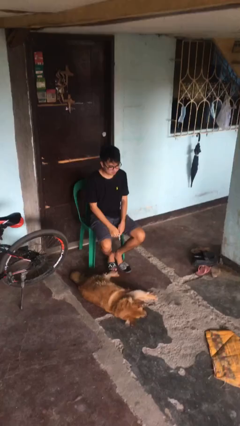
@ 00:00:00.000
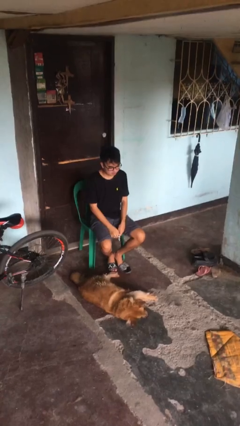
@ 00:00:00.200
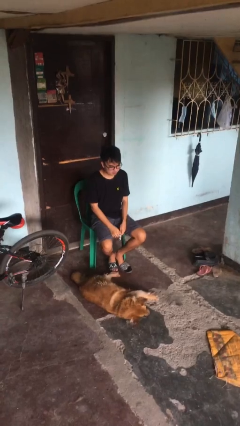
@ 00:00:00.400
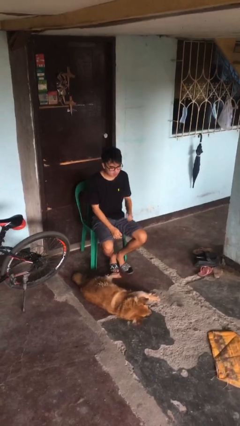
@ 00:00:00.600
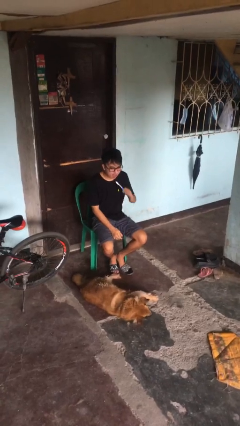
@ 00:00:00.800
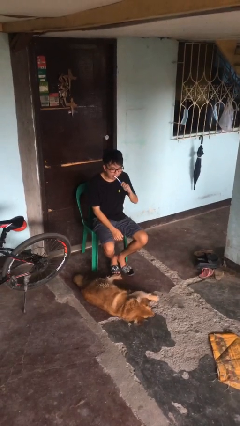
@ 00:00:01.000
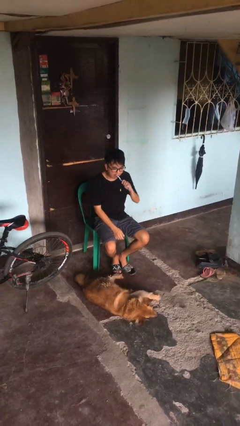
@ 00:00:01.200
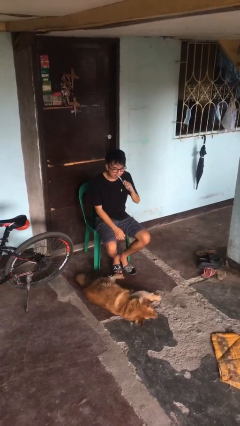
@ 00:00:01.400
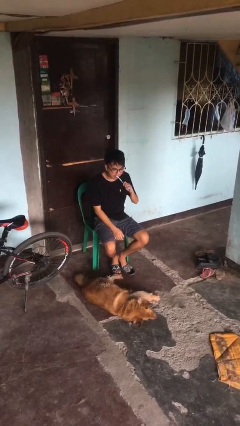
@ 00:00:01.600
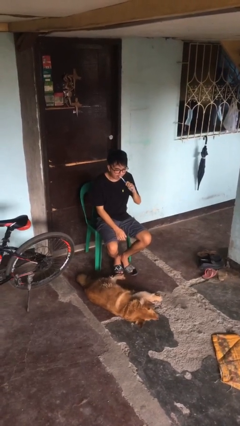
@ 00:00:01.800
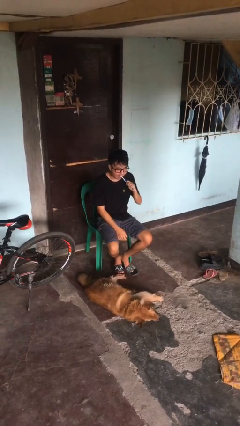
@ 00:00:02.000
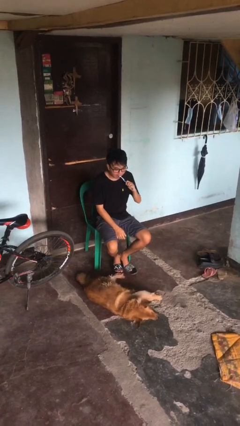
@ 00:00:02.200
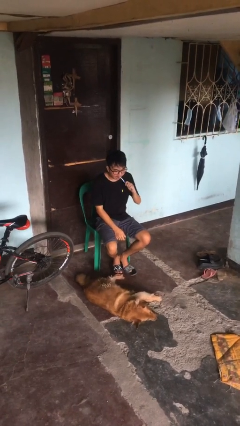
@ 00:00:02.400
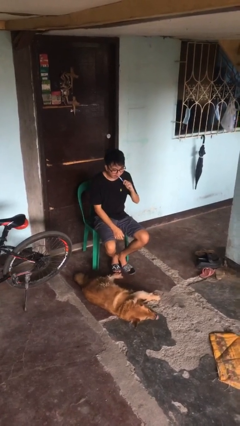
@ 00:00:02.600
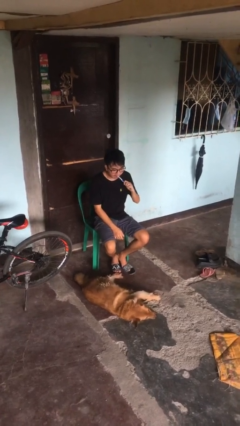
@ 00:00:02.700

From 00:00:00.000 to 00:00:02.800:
person brushes teeth

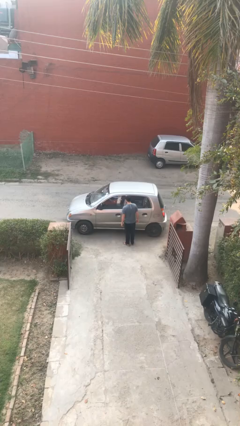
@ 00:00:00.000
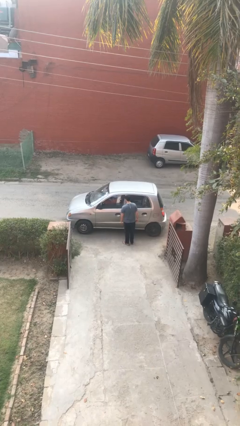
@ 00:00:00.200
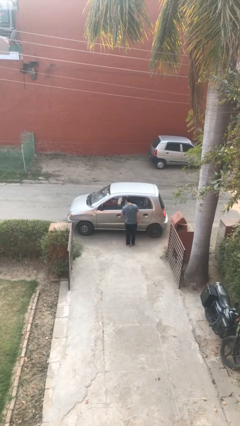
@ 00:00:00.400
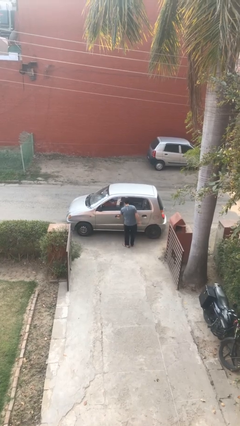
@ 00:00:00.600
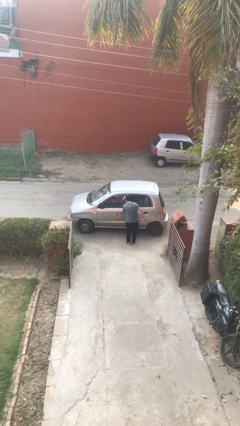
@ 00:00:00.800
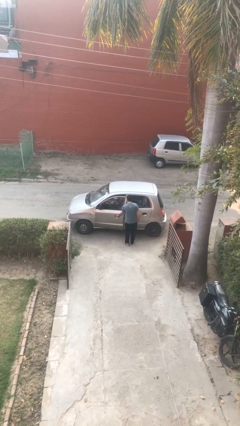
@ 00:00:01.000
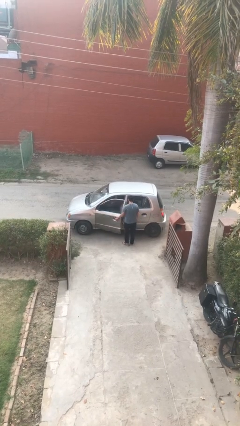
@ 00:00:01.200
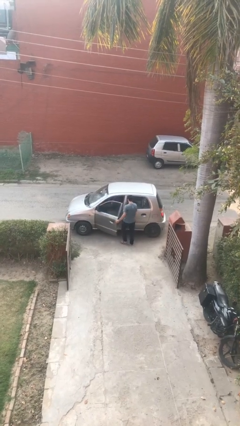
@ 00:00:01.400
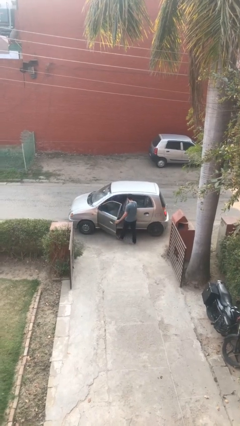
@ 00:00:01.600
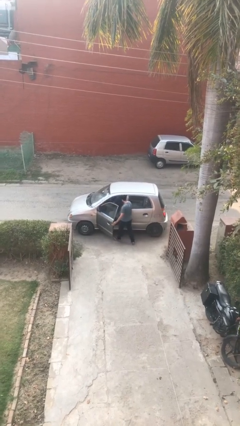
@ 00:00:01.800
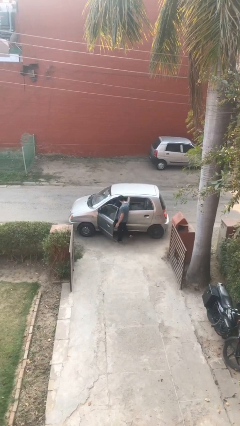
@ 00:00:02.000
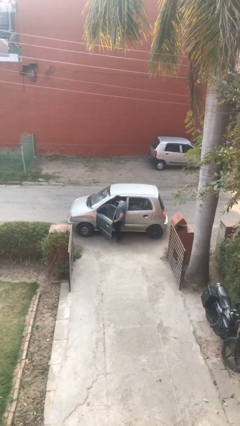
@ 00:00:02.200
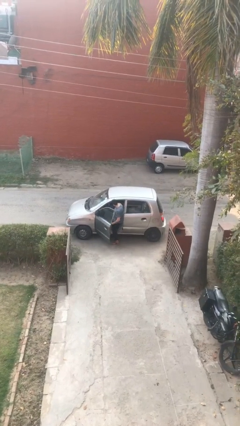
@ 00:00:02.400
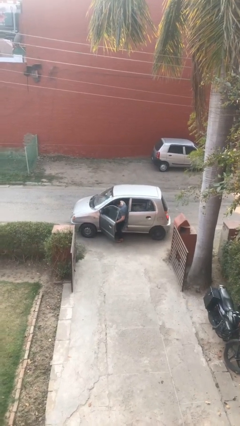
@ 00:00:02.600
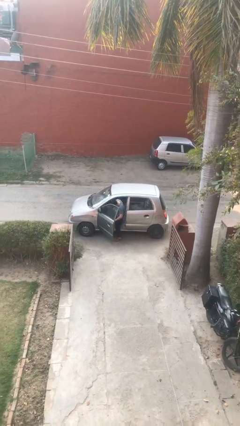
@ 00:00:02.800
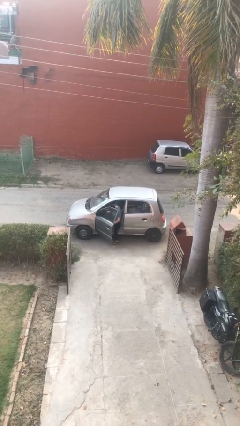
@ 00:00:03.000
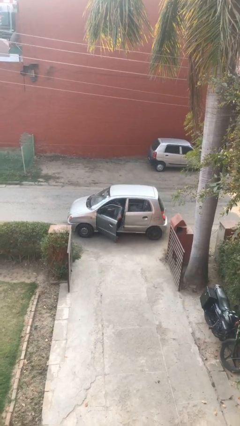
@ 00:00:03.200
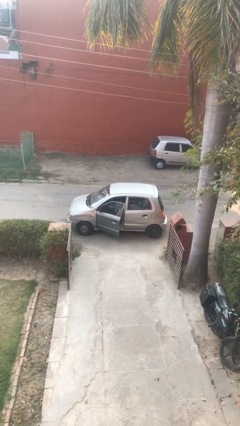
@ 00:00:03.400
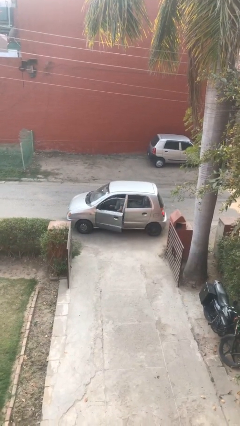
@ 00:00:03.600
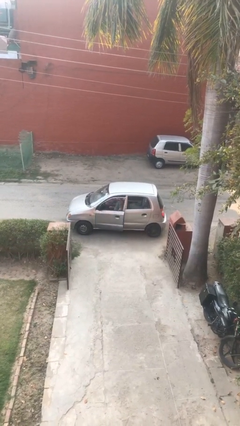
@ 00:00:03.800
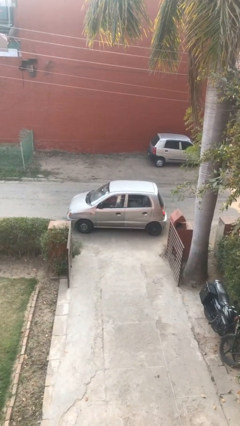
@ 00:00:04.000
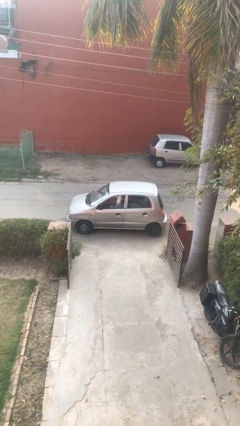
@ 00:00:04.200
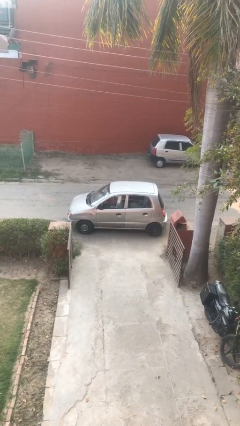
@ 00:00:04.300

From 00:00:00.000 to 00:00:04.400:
car picks up person

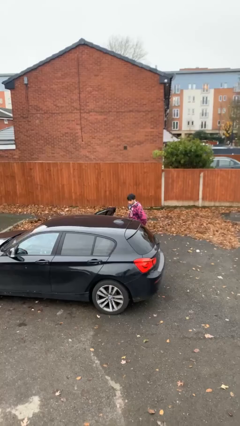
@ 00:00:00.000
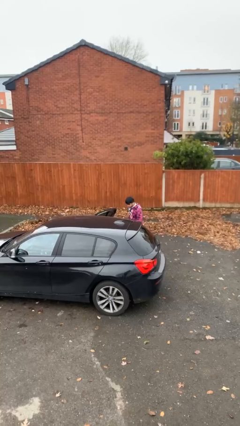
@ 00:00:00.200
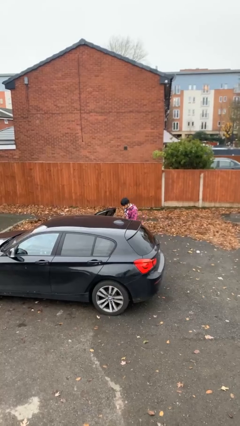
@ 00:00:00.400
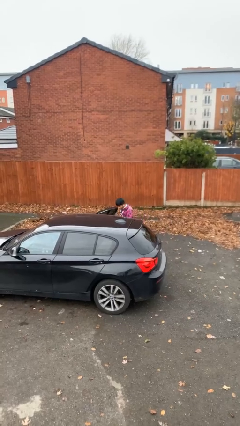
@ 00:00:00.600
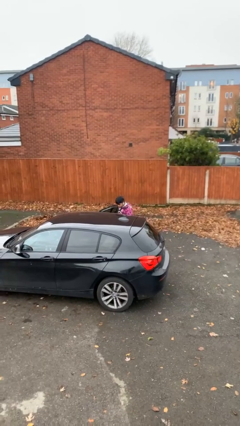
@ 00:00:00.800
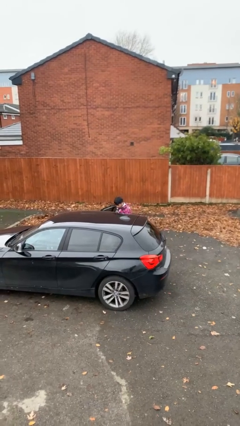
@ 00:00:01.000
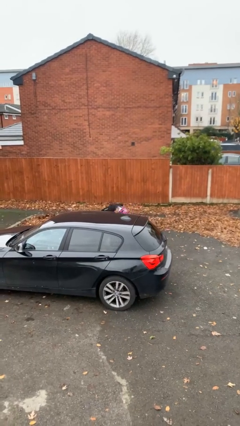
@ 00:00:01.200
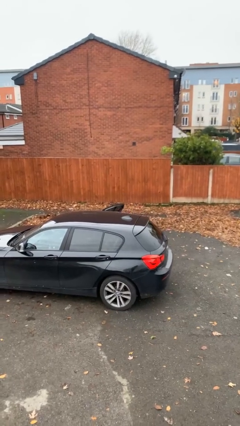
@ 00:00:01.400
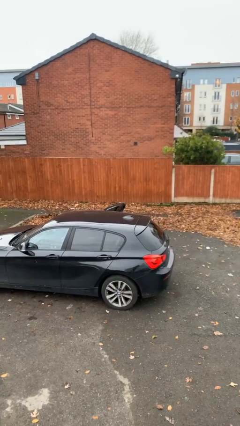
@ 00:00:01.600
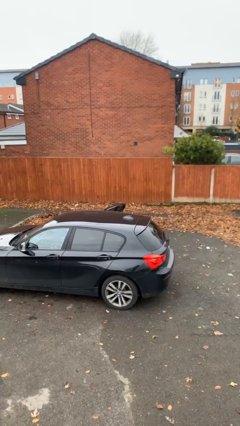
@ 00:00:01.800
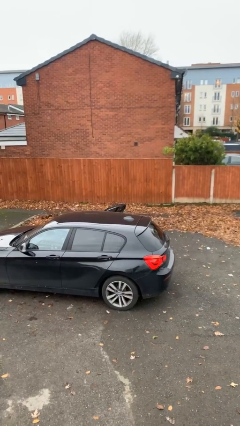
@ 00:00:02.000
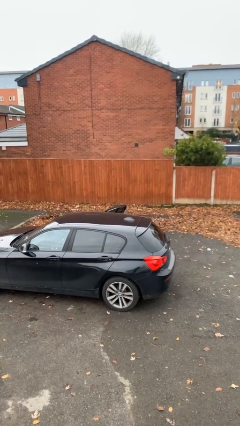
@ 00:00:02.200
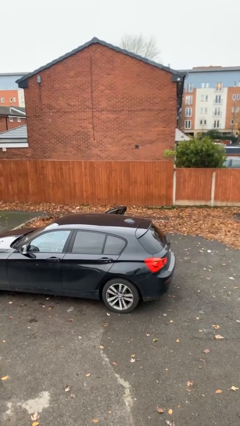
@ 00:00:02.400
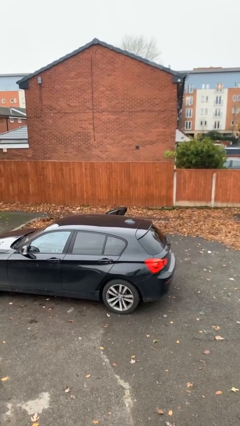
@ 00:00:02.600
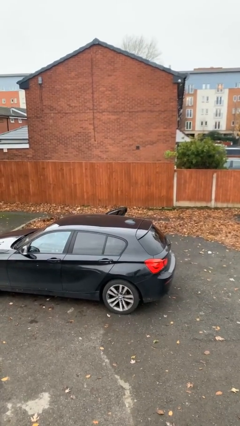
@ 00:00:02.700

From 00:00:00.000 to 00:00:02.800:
person enters car

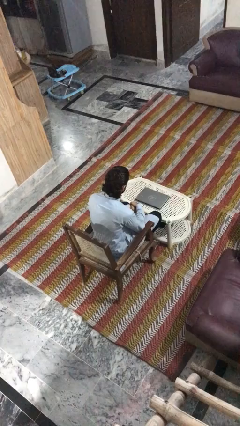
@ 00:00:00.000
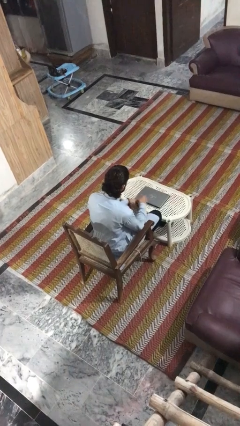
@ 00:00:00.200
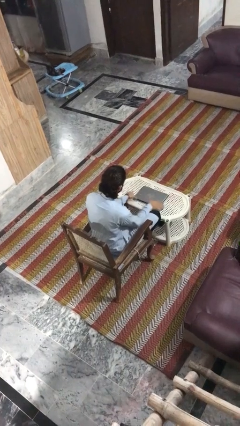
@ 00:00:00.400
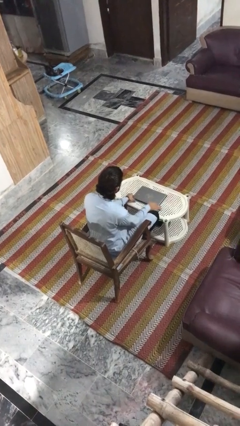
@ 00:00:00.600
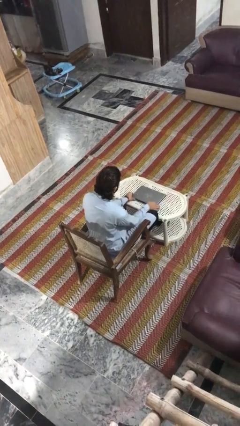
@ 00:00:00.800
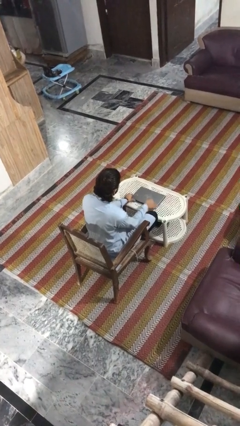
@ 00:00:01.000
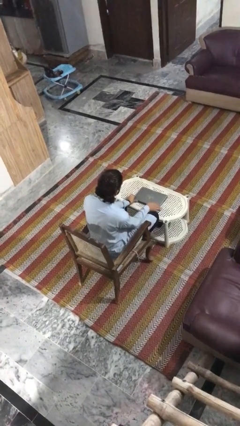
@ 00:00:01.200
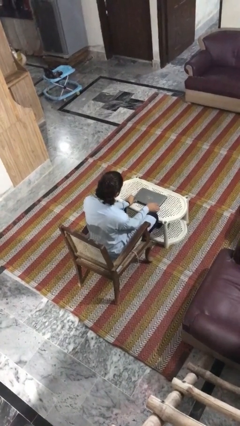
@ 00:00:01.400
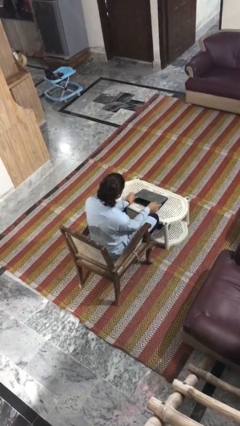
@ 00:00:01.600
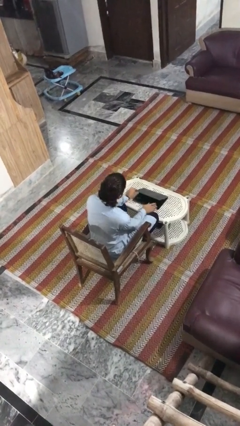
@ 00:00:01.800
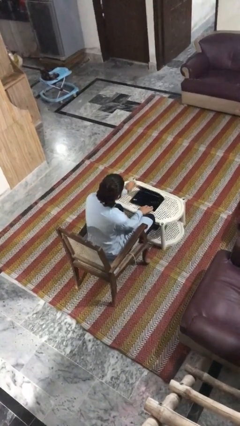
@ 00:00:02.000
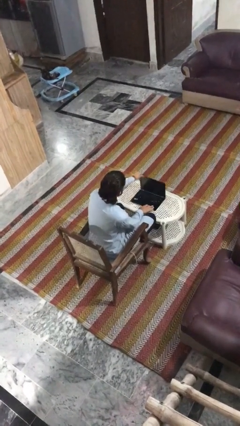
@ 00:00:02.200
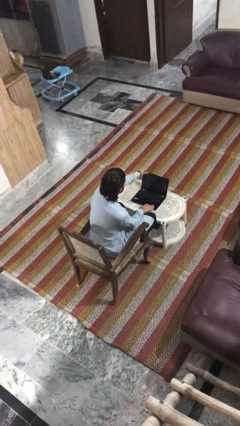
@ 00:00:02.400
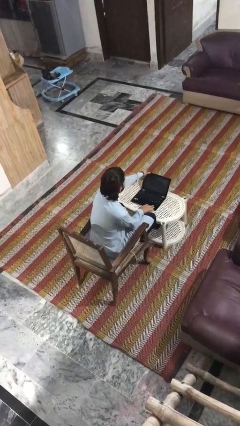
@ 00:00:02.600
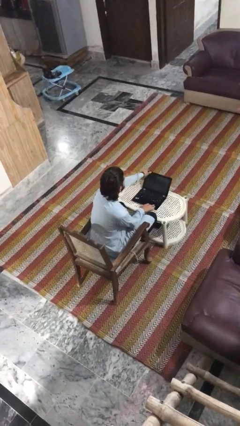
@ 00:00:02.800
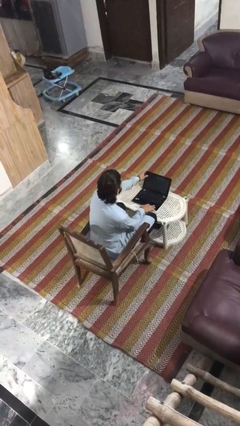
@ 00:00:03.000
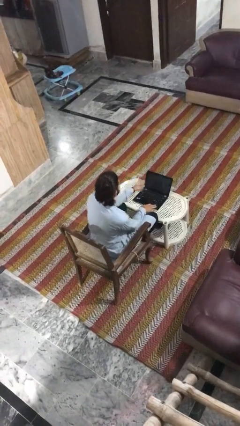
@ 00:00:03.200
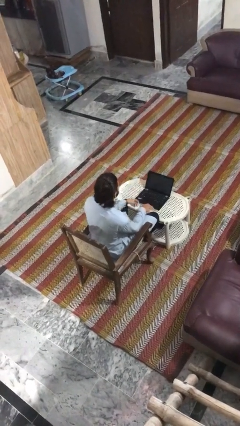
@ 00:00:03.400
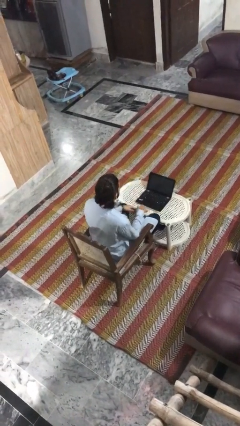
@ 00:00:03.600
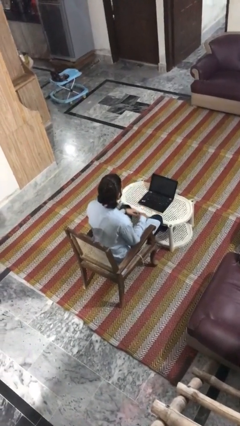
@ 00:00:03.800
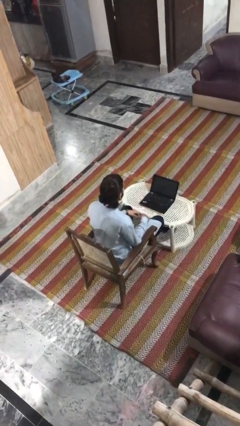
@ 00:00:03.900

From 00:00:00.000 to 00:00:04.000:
person opens laptop

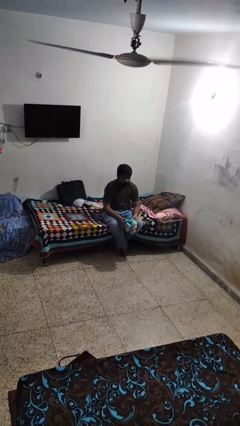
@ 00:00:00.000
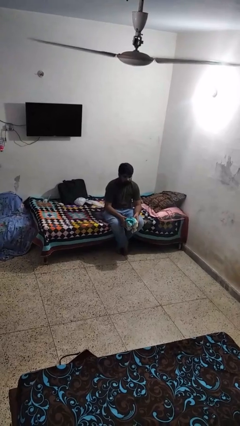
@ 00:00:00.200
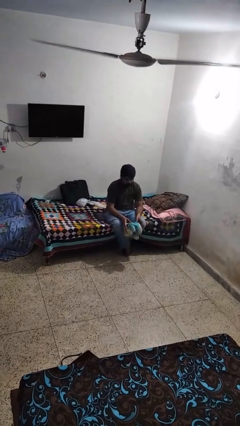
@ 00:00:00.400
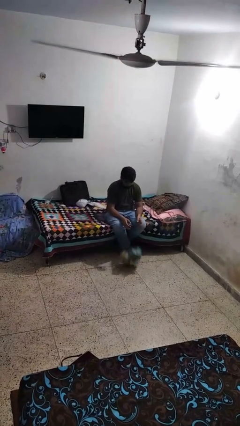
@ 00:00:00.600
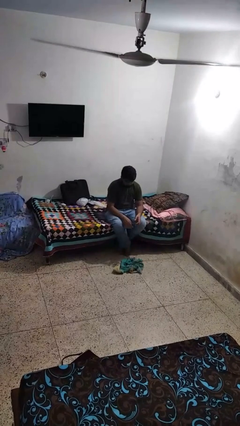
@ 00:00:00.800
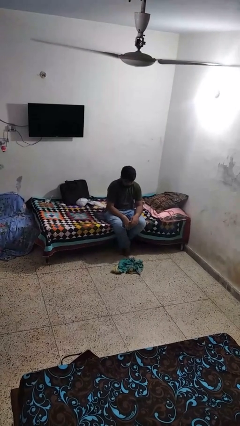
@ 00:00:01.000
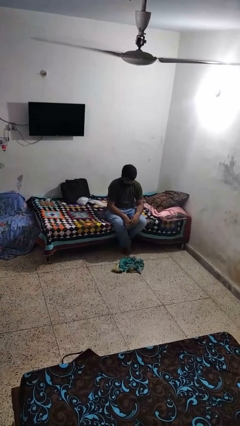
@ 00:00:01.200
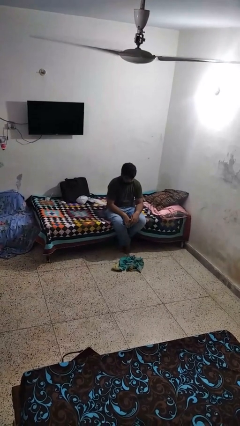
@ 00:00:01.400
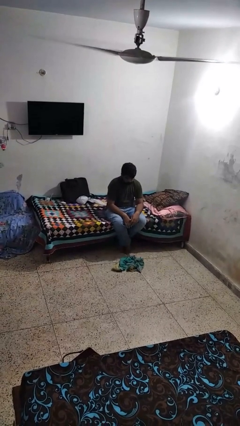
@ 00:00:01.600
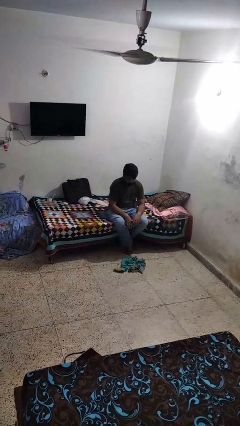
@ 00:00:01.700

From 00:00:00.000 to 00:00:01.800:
person drops object

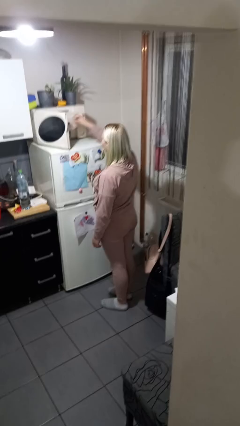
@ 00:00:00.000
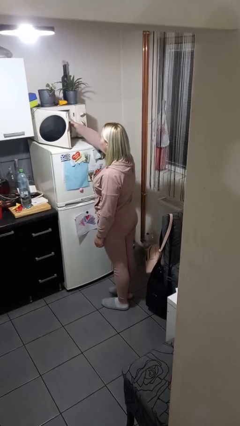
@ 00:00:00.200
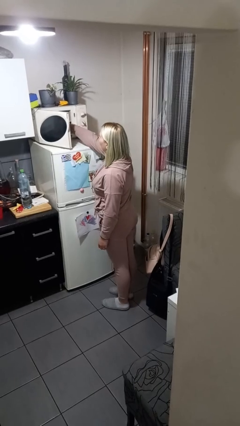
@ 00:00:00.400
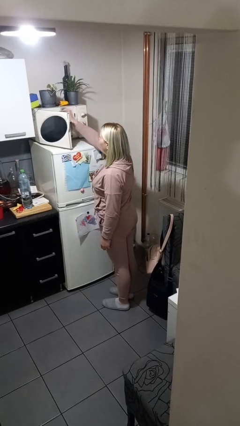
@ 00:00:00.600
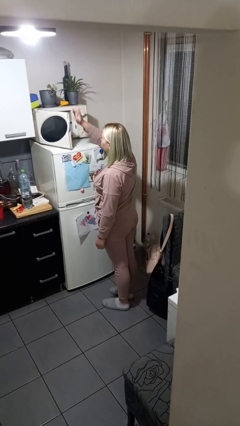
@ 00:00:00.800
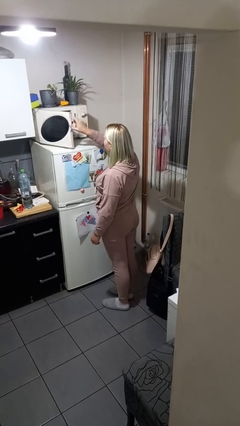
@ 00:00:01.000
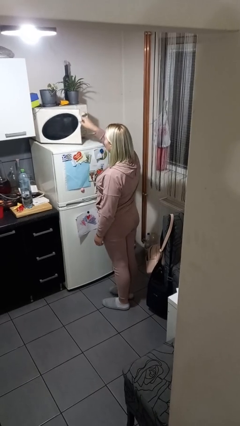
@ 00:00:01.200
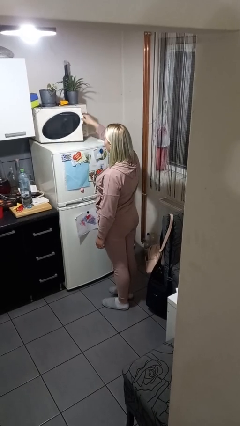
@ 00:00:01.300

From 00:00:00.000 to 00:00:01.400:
person puts object into microwave
